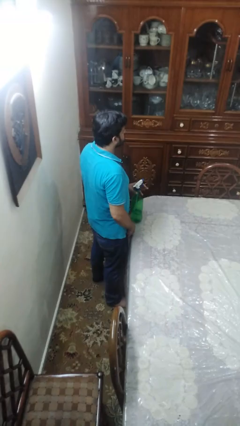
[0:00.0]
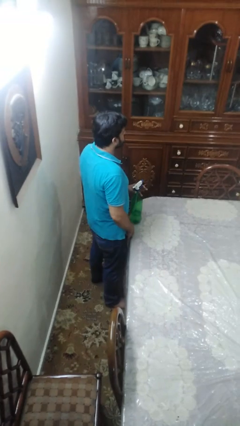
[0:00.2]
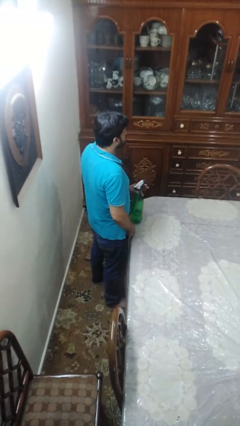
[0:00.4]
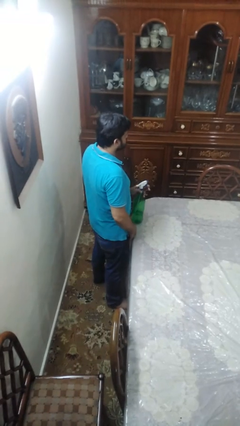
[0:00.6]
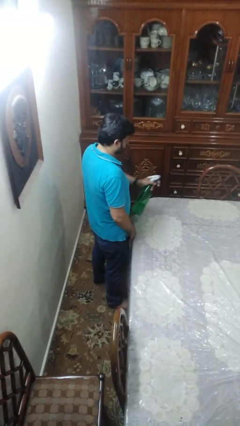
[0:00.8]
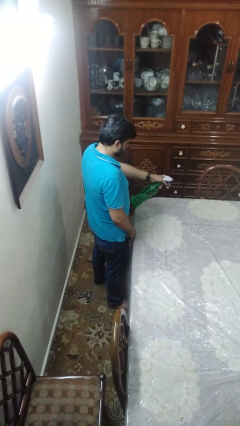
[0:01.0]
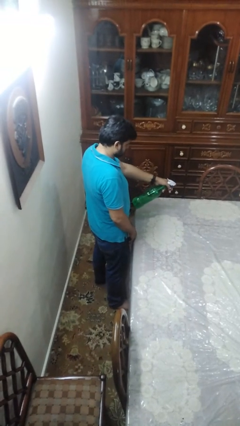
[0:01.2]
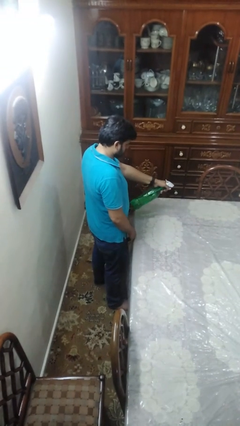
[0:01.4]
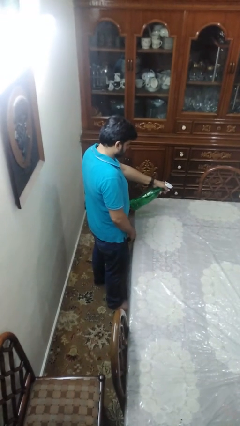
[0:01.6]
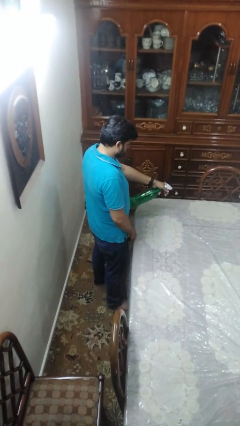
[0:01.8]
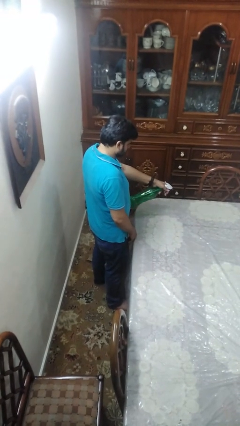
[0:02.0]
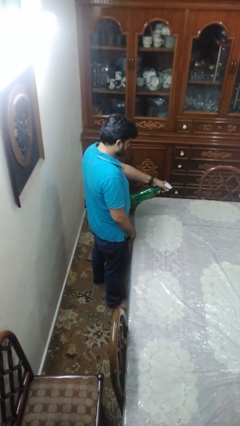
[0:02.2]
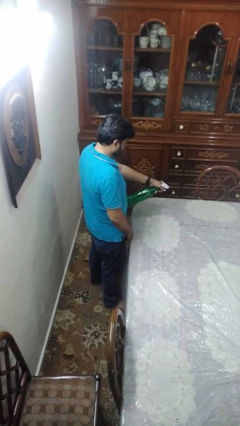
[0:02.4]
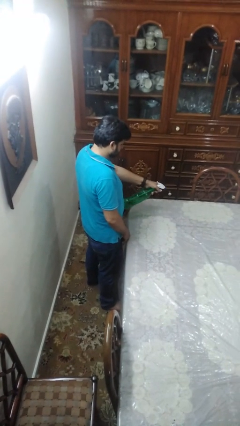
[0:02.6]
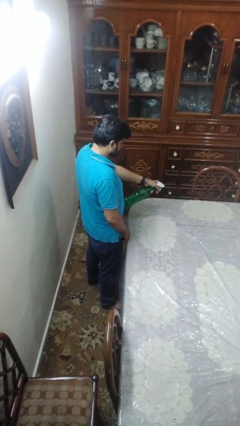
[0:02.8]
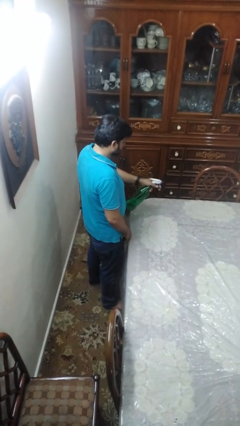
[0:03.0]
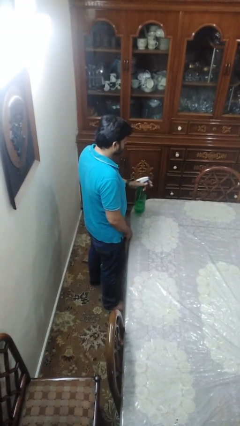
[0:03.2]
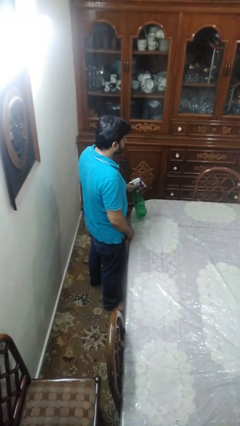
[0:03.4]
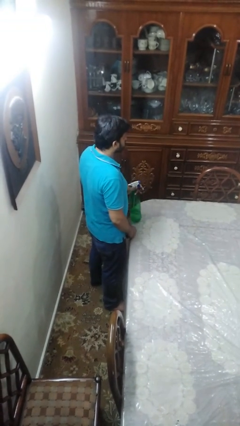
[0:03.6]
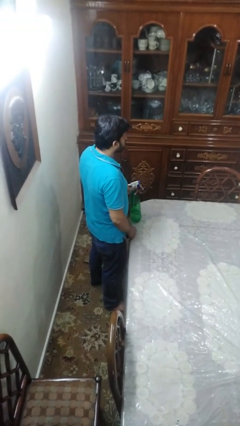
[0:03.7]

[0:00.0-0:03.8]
person sprays from bottle

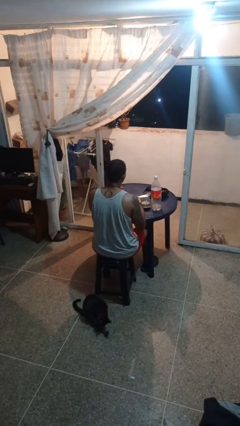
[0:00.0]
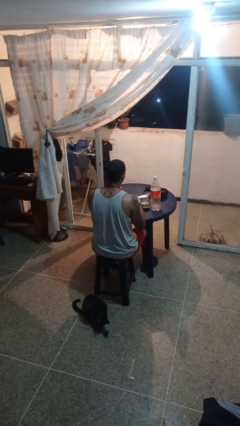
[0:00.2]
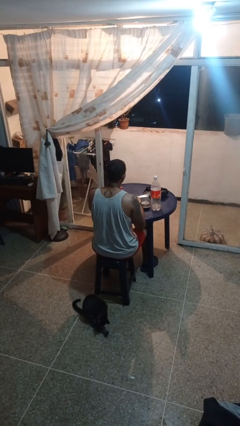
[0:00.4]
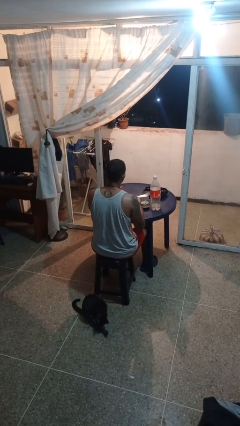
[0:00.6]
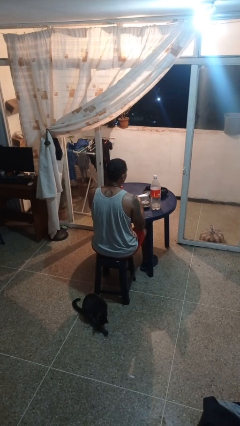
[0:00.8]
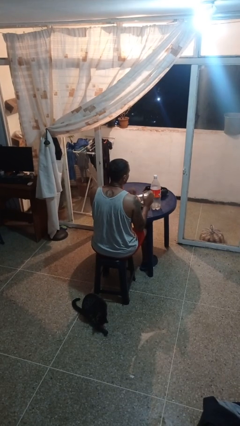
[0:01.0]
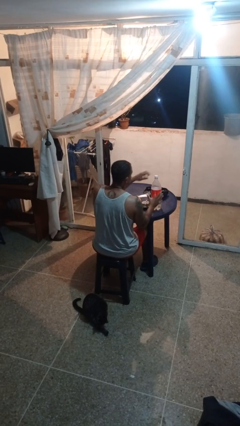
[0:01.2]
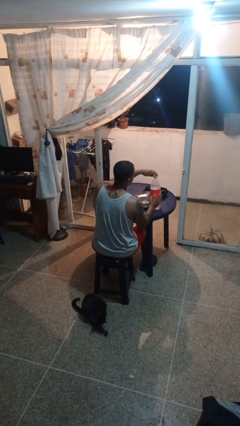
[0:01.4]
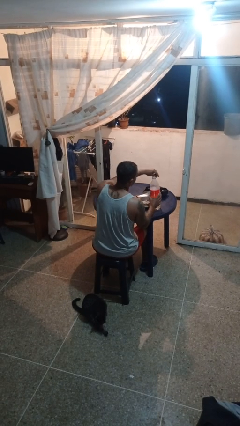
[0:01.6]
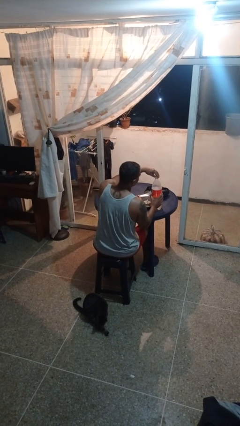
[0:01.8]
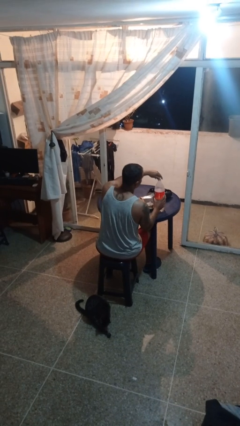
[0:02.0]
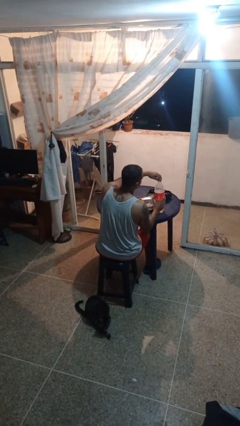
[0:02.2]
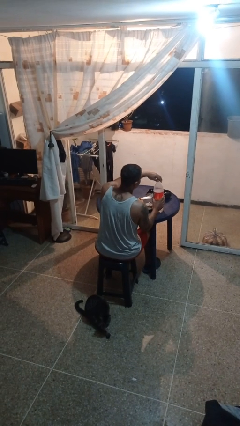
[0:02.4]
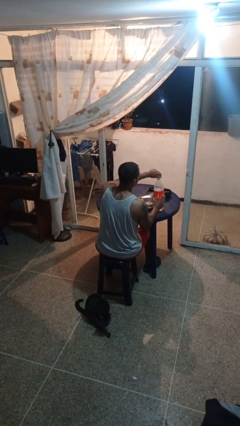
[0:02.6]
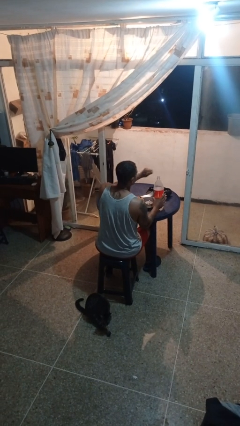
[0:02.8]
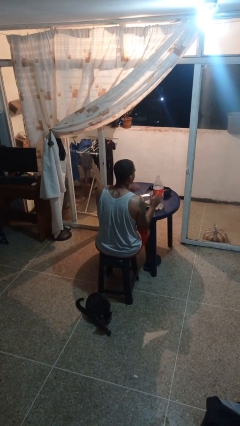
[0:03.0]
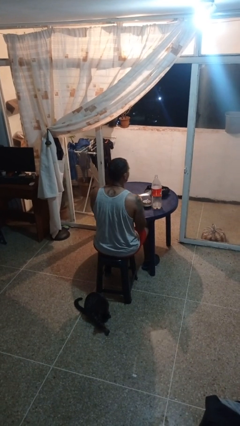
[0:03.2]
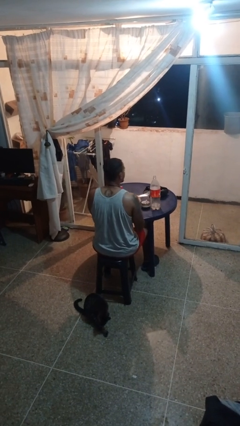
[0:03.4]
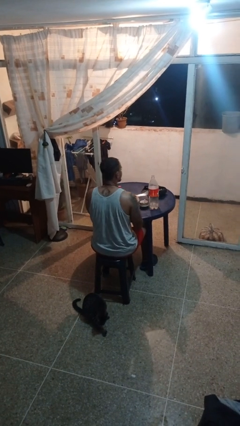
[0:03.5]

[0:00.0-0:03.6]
person unscrews lid from bottle

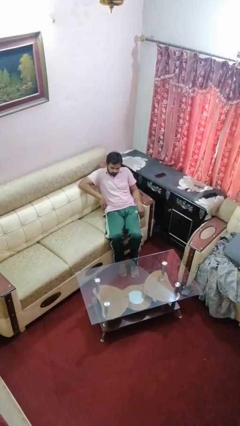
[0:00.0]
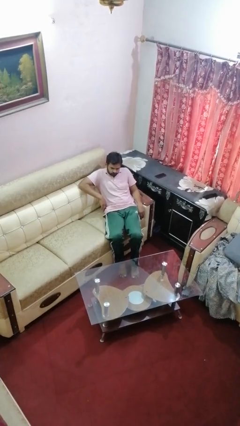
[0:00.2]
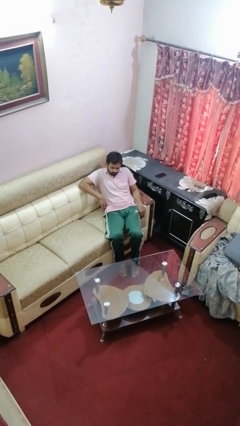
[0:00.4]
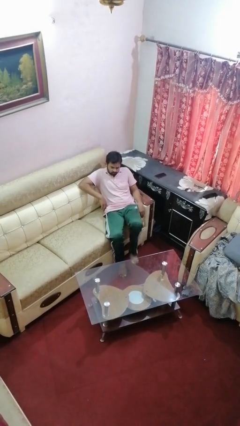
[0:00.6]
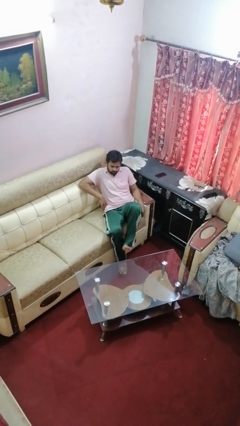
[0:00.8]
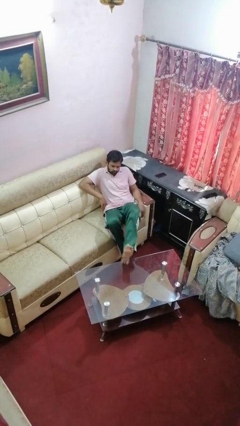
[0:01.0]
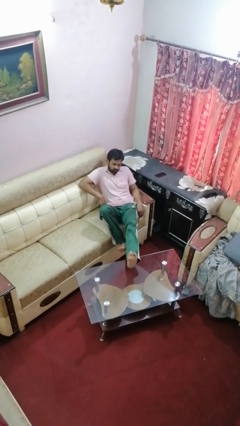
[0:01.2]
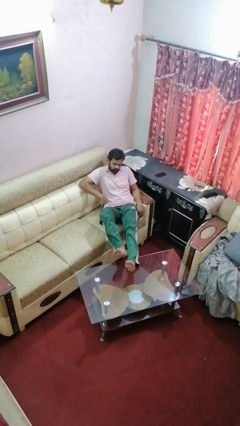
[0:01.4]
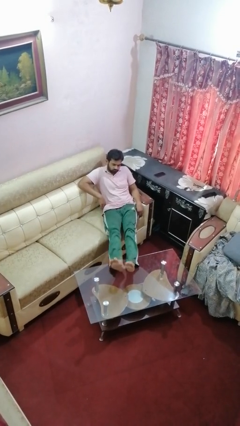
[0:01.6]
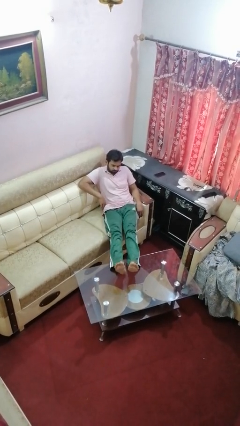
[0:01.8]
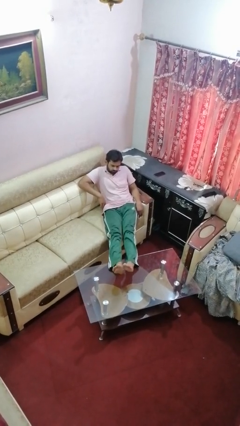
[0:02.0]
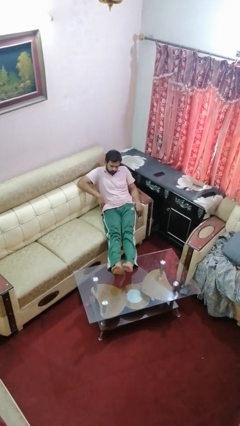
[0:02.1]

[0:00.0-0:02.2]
person puts feet up

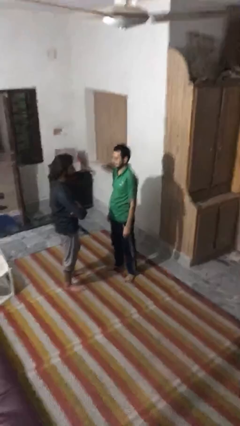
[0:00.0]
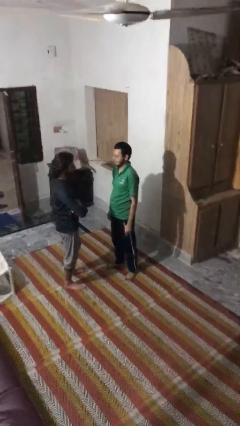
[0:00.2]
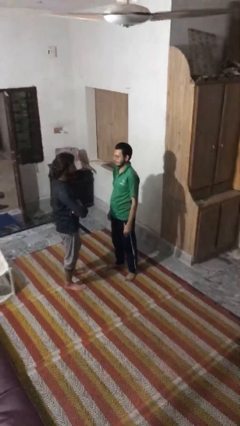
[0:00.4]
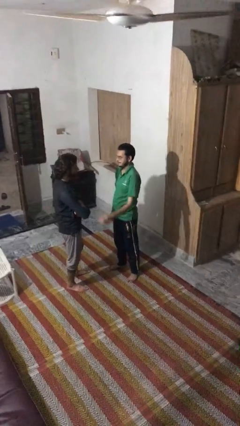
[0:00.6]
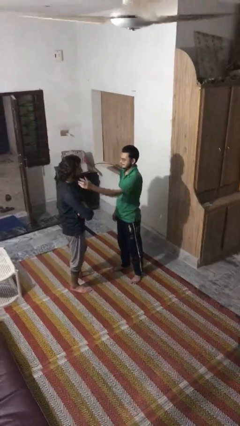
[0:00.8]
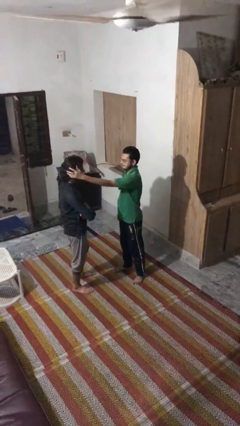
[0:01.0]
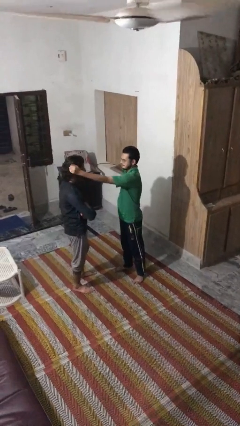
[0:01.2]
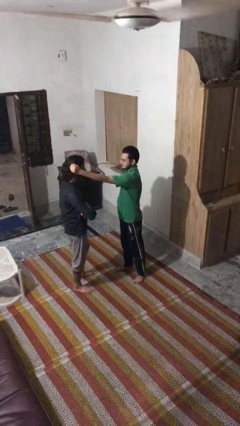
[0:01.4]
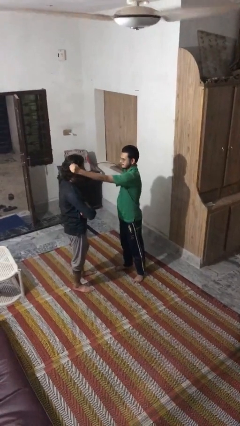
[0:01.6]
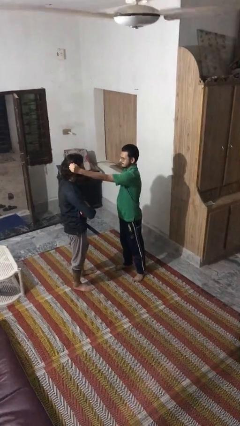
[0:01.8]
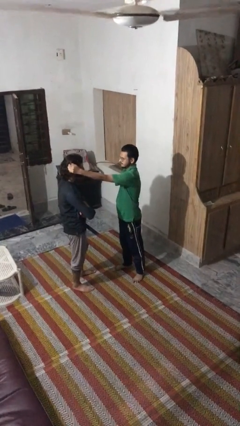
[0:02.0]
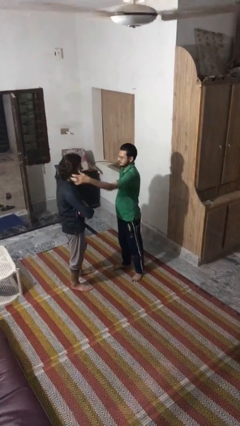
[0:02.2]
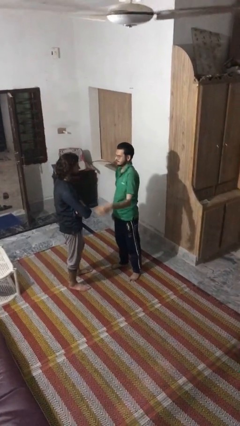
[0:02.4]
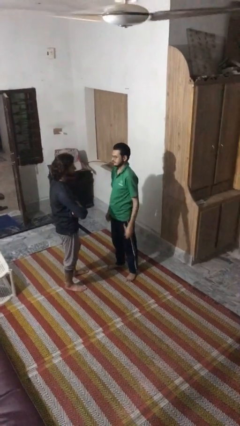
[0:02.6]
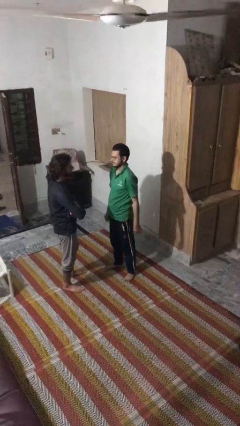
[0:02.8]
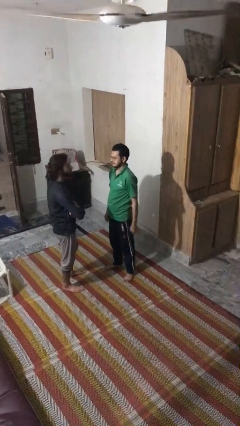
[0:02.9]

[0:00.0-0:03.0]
person grabs person by hair

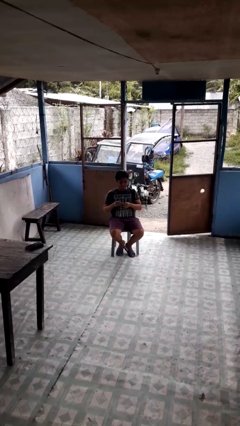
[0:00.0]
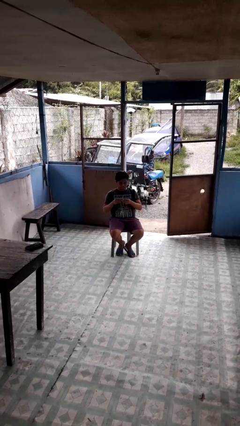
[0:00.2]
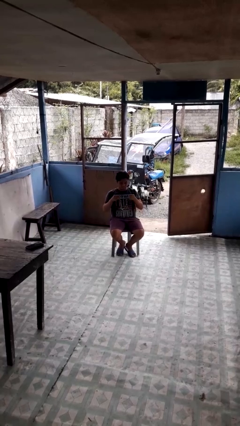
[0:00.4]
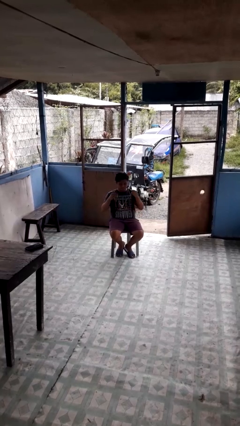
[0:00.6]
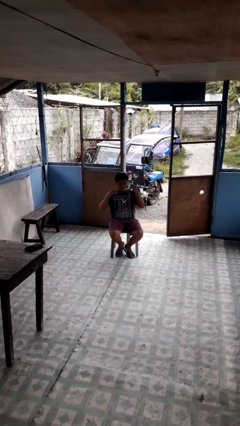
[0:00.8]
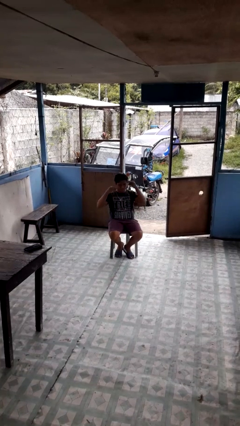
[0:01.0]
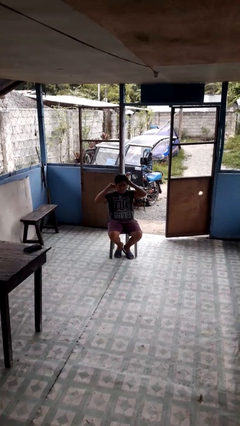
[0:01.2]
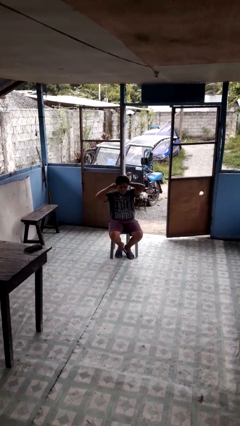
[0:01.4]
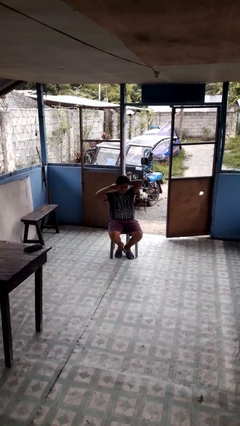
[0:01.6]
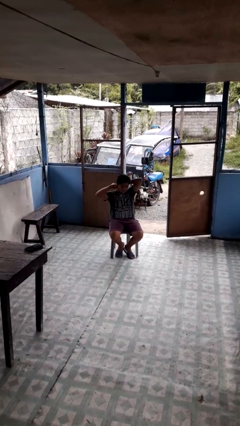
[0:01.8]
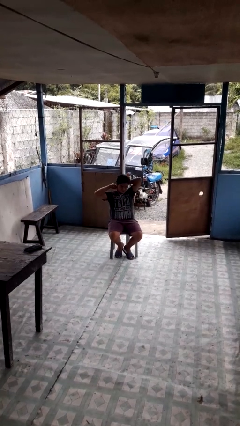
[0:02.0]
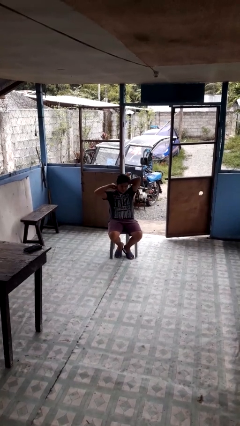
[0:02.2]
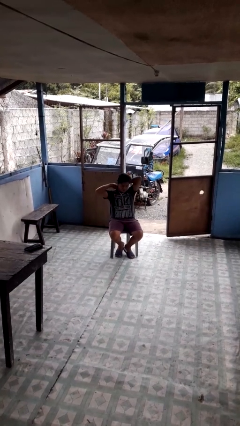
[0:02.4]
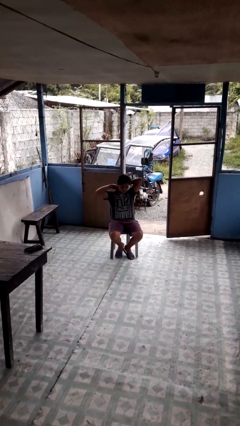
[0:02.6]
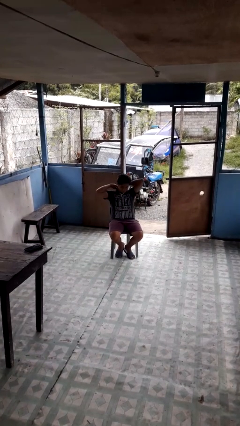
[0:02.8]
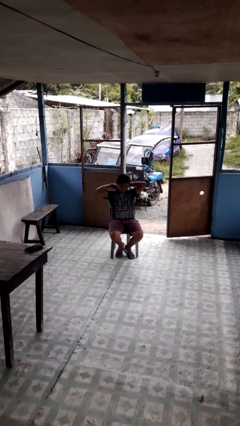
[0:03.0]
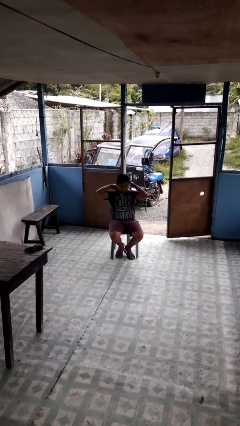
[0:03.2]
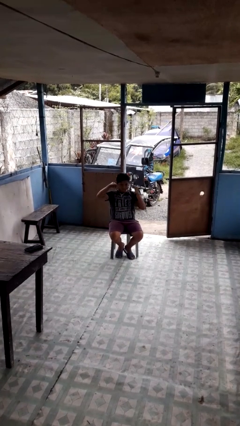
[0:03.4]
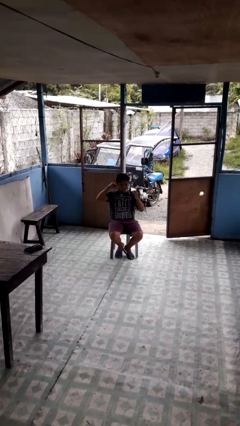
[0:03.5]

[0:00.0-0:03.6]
person puts on necklace

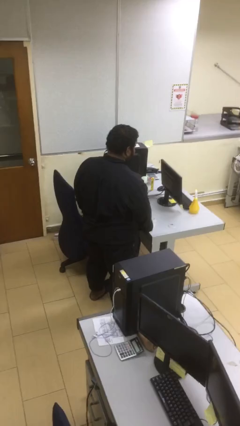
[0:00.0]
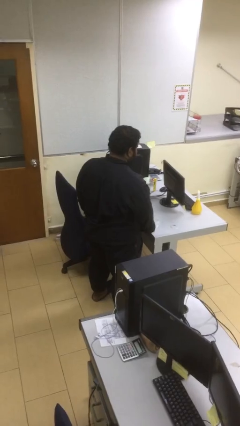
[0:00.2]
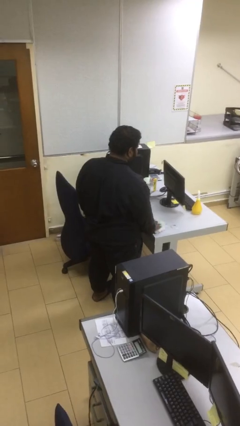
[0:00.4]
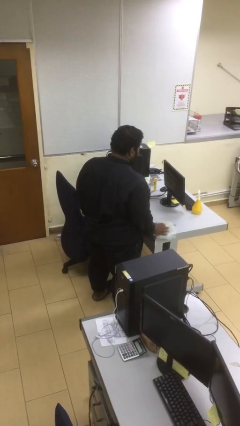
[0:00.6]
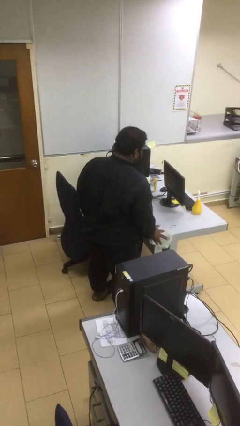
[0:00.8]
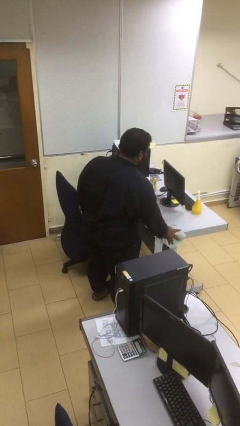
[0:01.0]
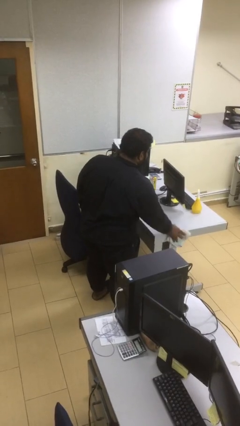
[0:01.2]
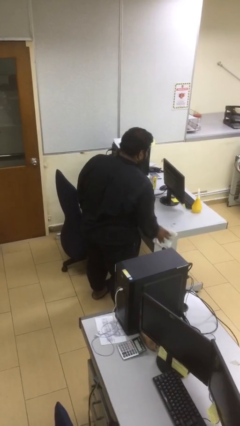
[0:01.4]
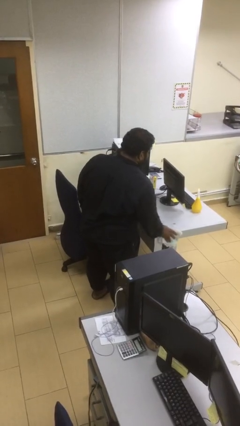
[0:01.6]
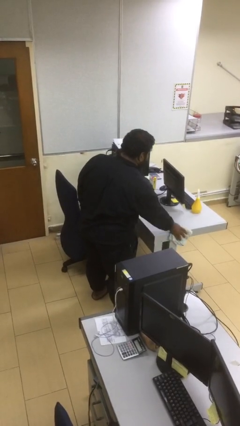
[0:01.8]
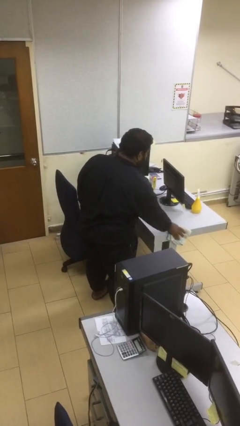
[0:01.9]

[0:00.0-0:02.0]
person cleans table with rag
